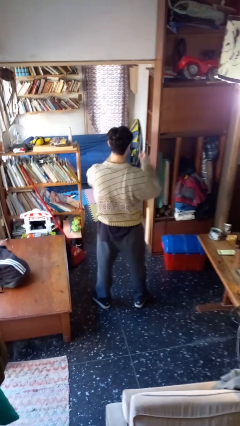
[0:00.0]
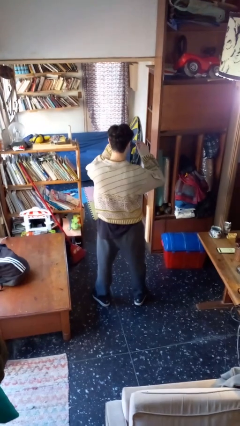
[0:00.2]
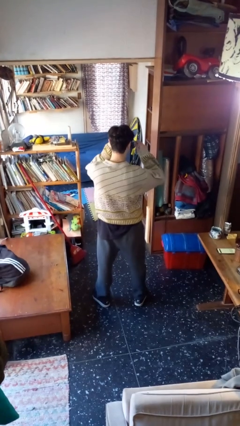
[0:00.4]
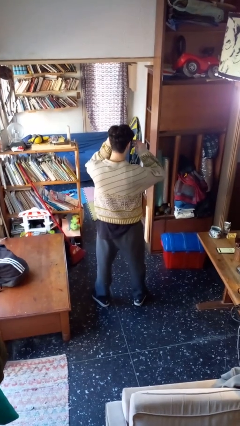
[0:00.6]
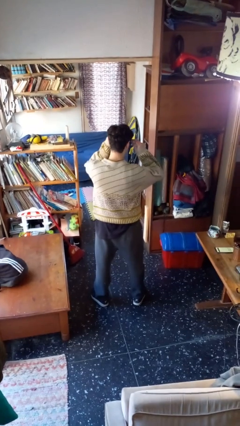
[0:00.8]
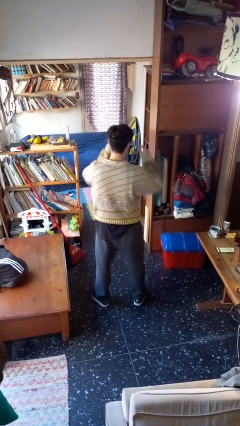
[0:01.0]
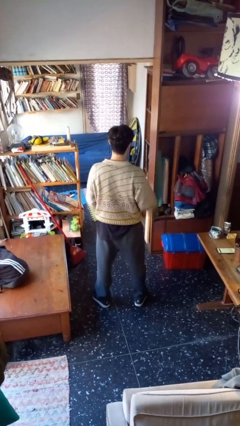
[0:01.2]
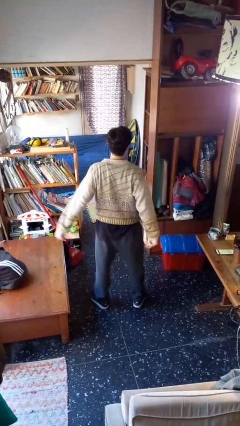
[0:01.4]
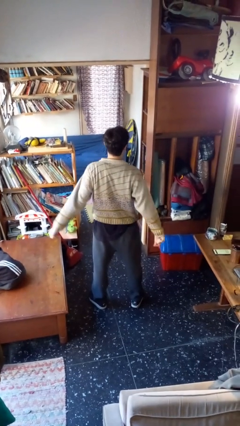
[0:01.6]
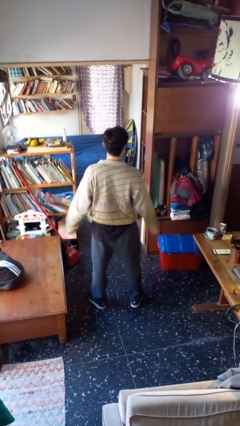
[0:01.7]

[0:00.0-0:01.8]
person puts on sunglasses

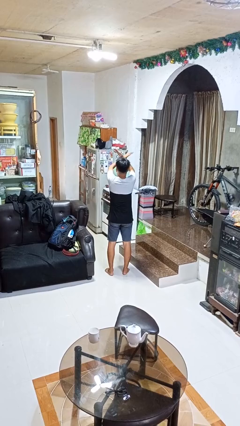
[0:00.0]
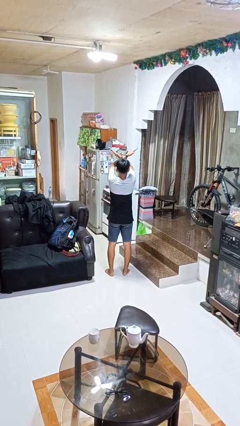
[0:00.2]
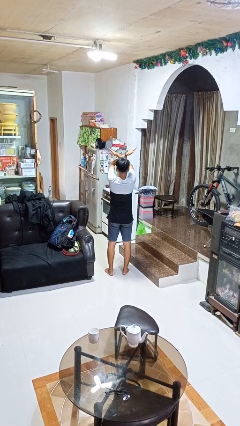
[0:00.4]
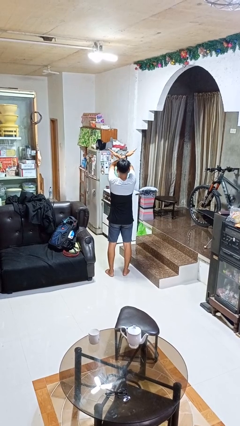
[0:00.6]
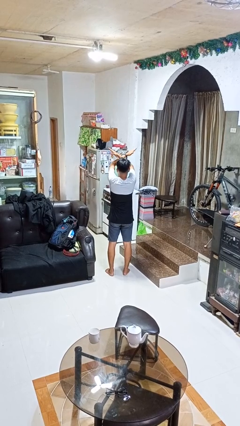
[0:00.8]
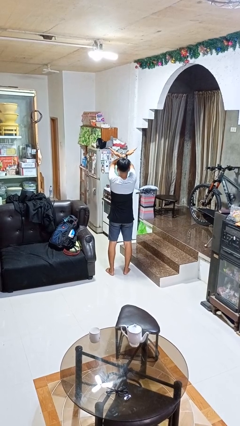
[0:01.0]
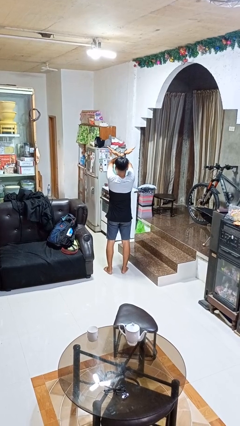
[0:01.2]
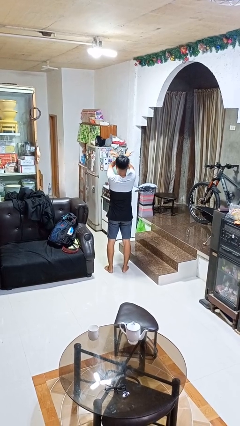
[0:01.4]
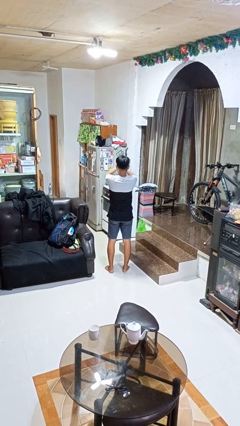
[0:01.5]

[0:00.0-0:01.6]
person gestures arms x

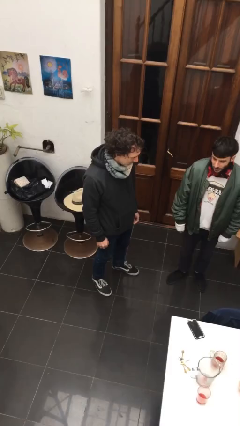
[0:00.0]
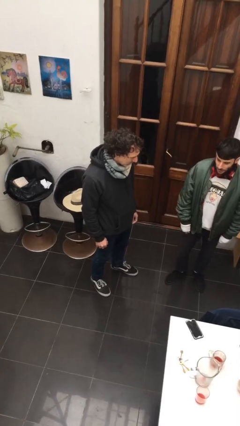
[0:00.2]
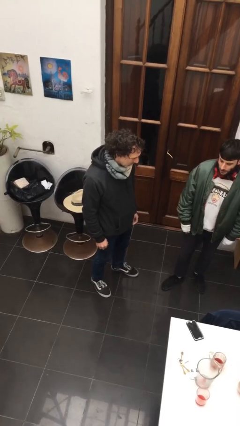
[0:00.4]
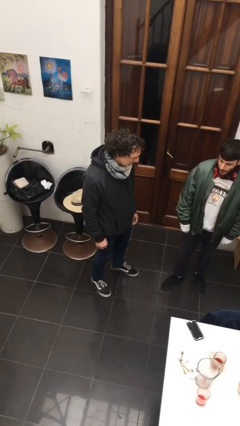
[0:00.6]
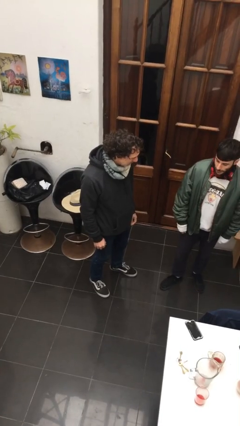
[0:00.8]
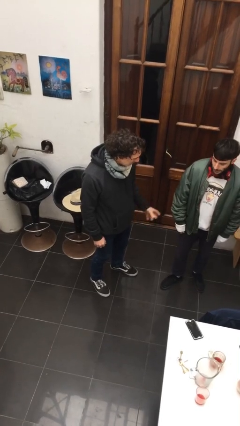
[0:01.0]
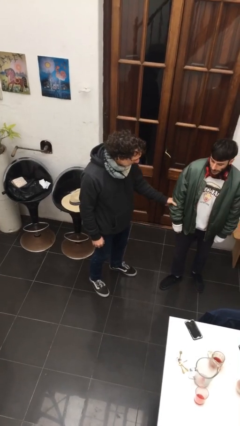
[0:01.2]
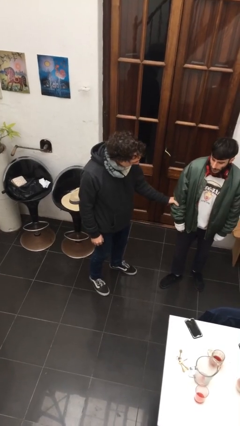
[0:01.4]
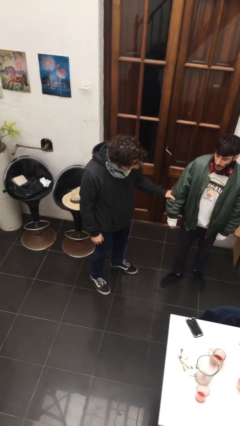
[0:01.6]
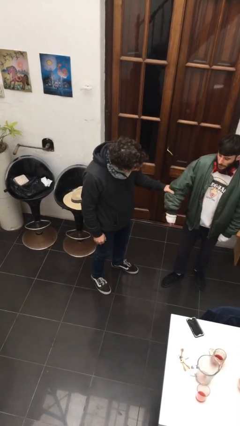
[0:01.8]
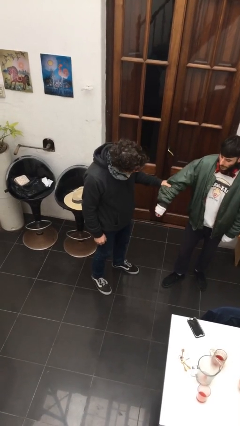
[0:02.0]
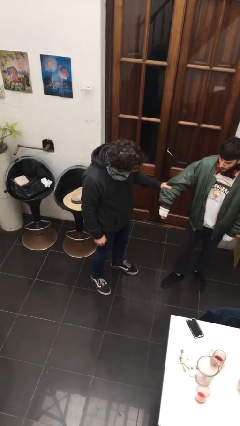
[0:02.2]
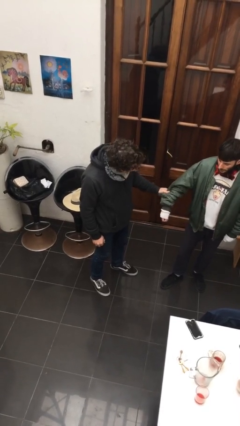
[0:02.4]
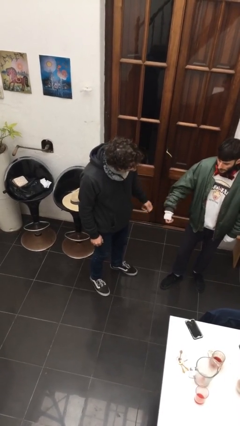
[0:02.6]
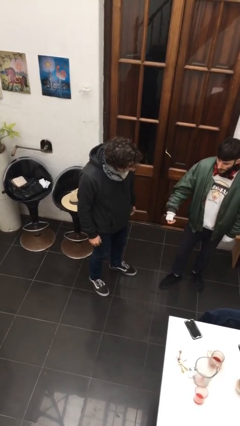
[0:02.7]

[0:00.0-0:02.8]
person grabs person by forearm

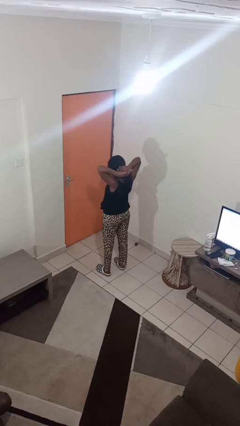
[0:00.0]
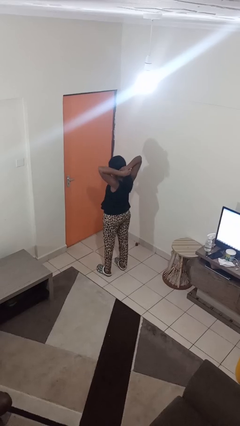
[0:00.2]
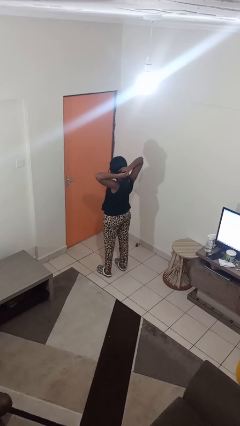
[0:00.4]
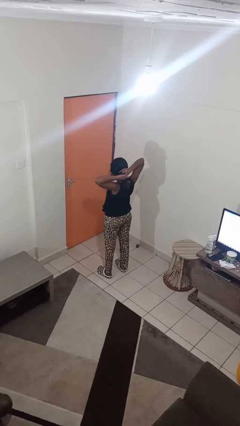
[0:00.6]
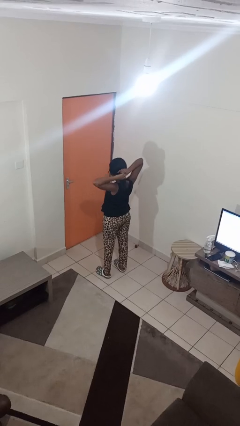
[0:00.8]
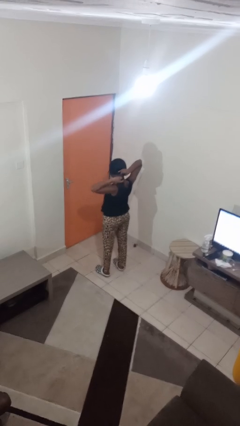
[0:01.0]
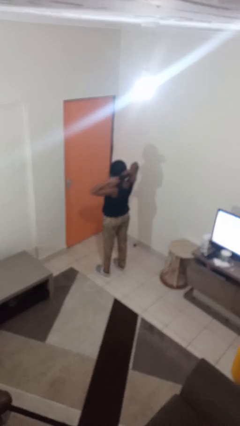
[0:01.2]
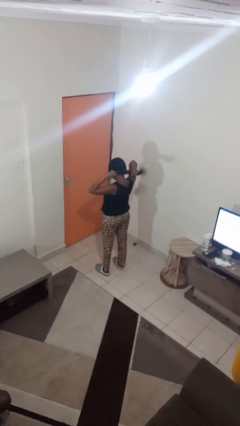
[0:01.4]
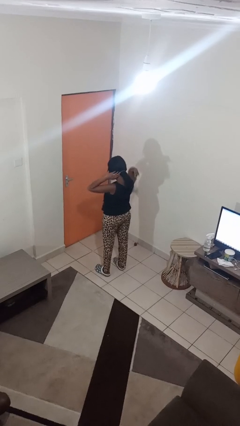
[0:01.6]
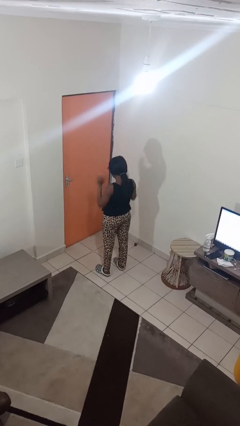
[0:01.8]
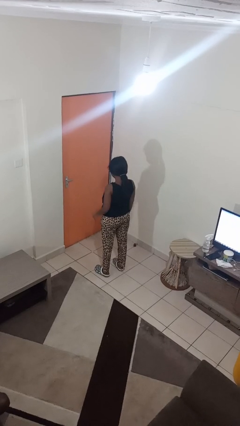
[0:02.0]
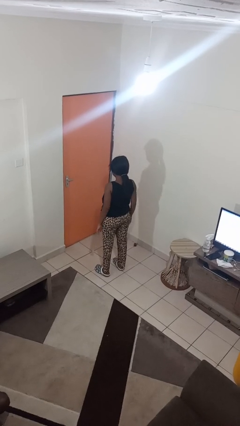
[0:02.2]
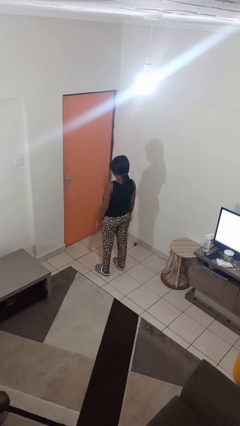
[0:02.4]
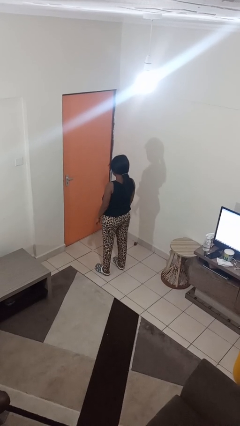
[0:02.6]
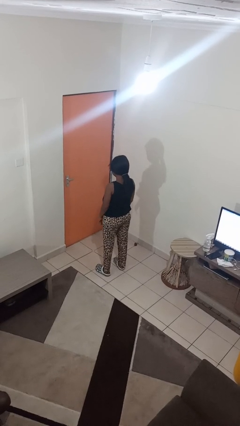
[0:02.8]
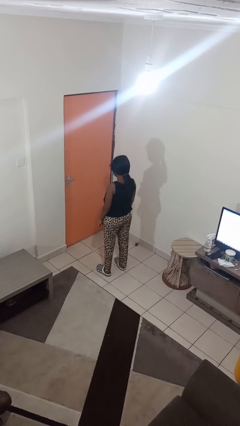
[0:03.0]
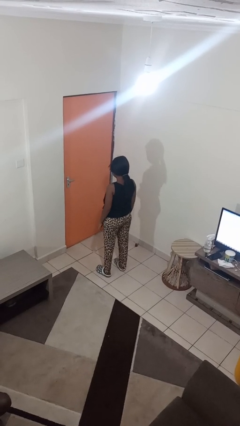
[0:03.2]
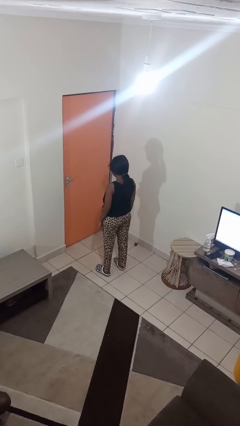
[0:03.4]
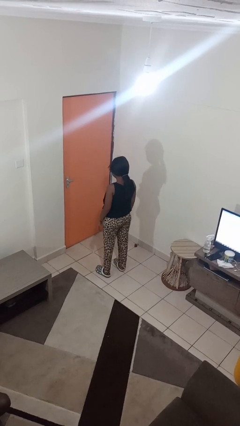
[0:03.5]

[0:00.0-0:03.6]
person puts hair in ponytail

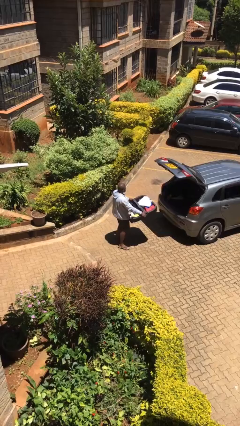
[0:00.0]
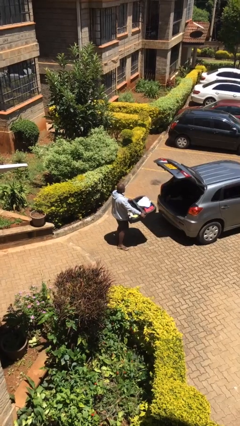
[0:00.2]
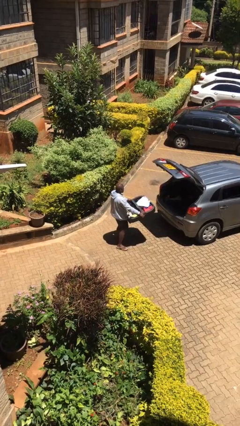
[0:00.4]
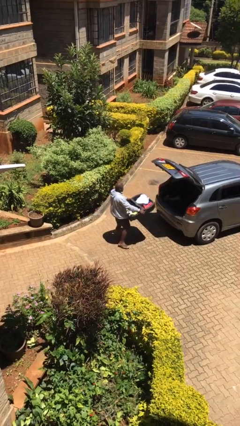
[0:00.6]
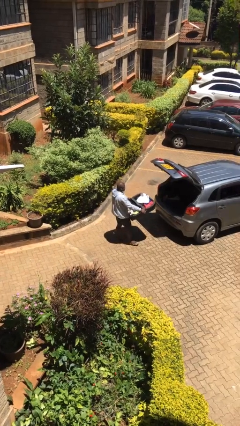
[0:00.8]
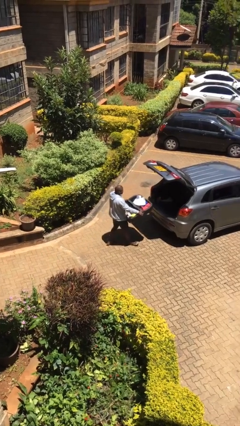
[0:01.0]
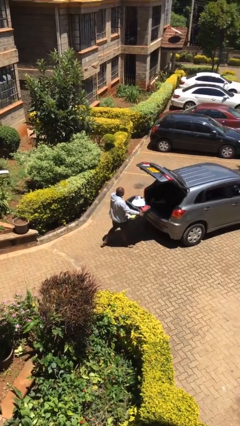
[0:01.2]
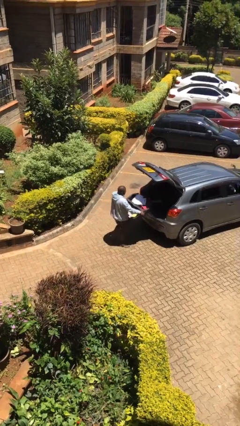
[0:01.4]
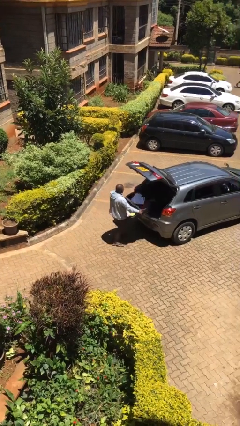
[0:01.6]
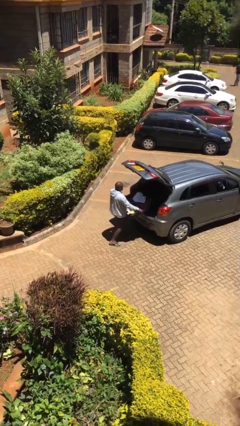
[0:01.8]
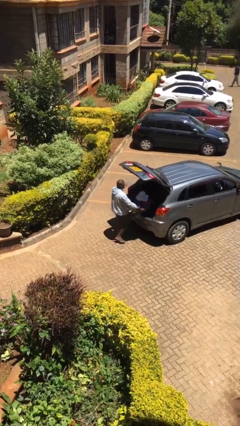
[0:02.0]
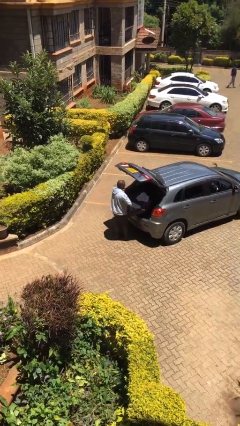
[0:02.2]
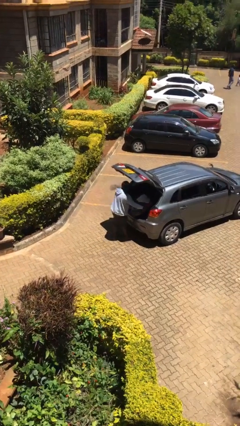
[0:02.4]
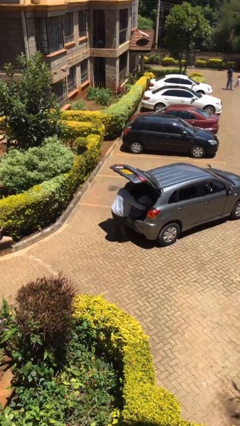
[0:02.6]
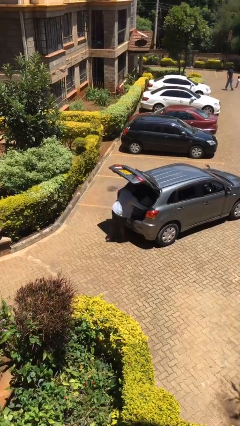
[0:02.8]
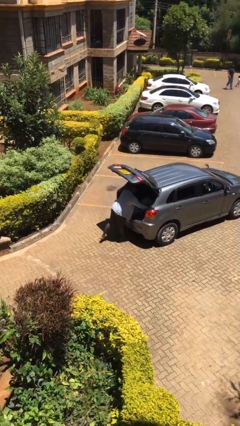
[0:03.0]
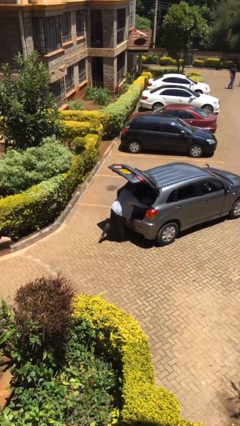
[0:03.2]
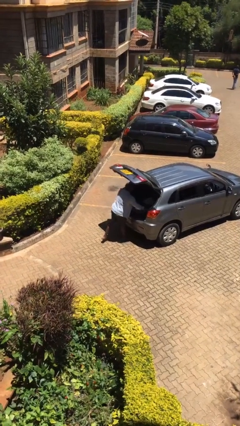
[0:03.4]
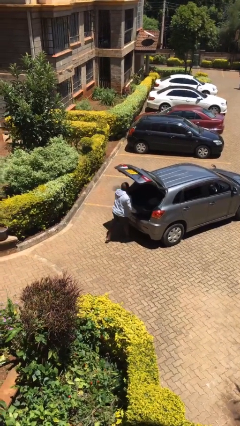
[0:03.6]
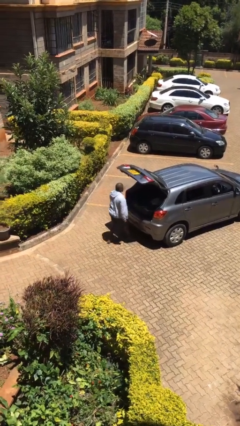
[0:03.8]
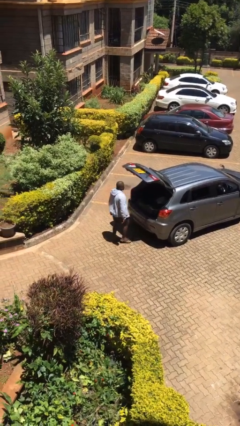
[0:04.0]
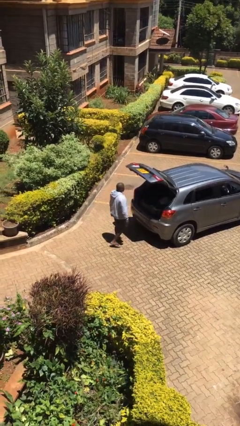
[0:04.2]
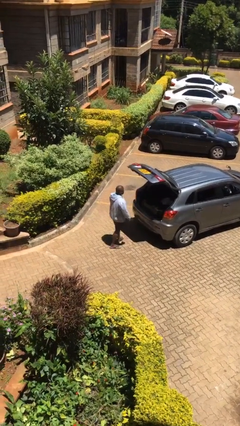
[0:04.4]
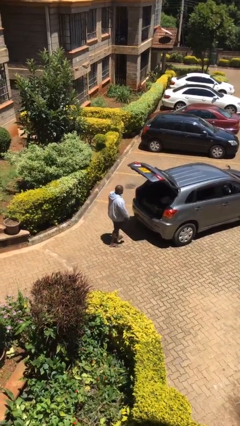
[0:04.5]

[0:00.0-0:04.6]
person loads car

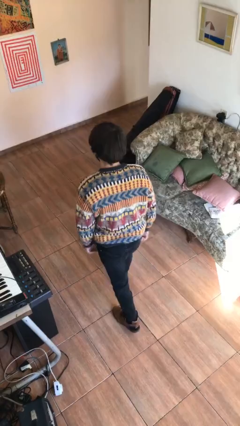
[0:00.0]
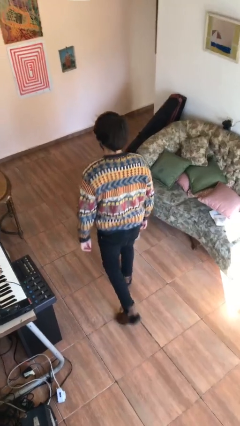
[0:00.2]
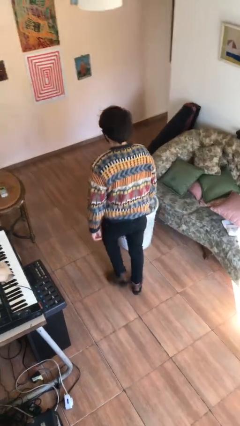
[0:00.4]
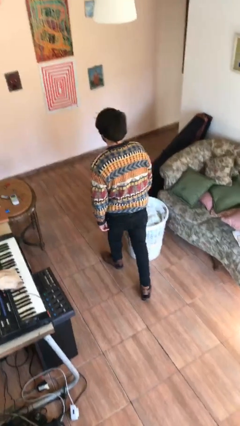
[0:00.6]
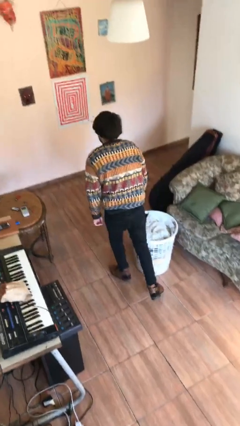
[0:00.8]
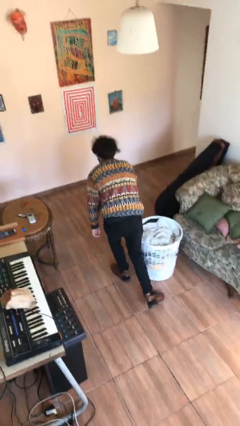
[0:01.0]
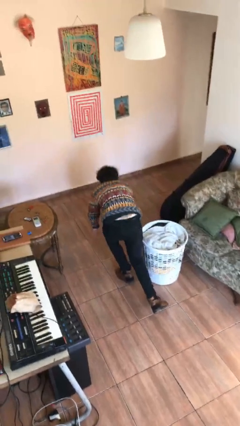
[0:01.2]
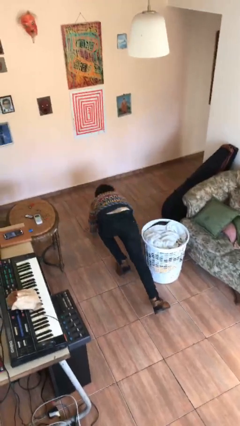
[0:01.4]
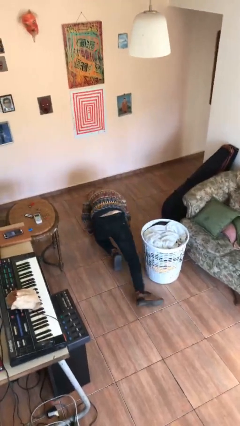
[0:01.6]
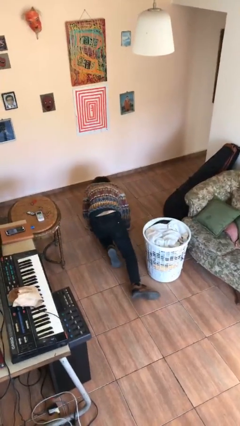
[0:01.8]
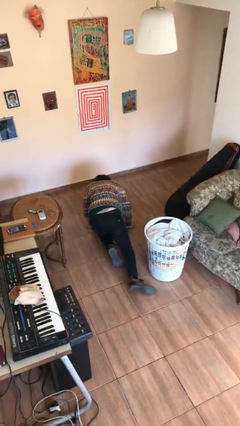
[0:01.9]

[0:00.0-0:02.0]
person trips on object on floor

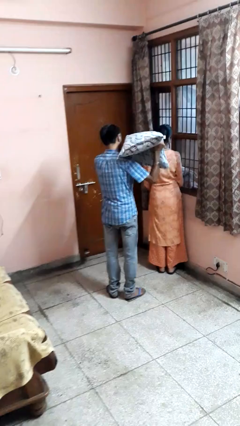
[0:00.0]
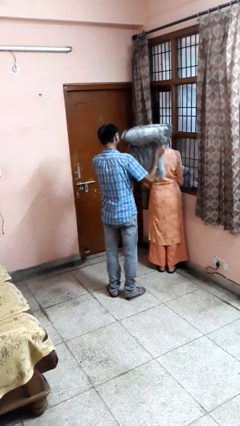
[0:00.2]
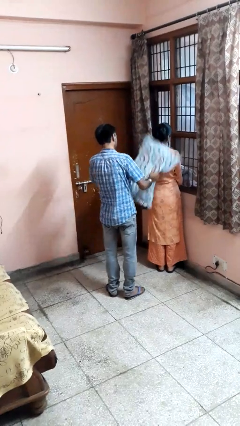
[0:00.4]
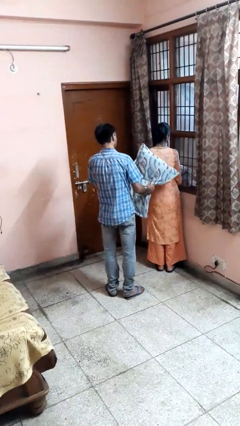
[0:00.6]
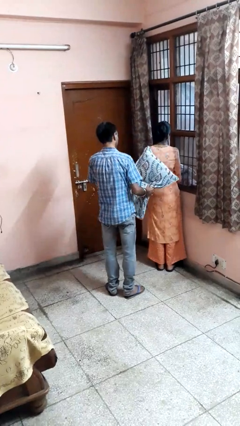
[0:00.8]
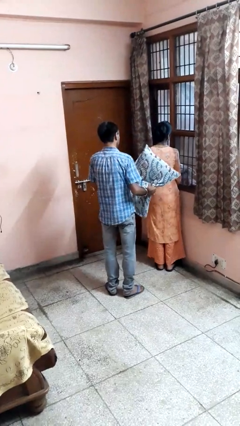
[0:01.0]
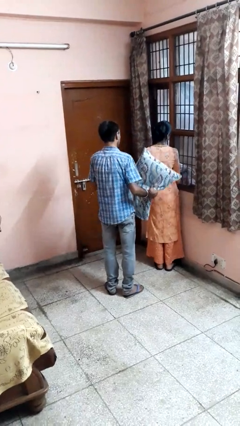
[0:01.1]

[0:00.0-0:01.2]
person hits person with pillow
